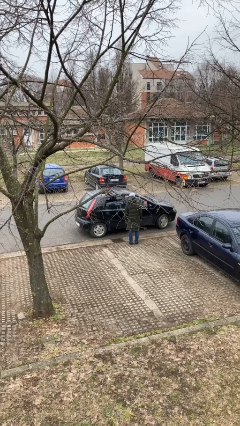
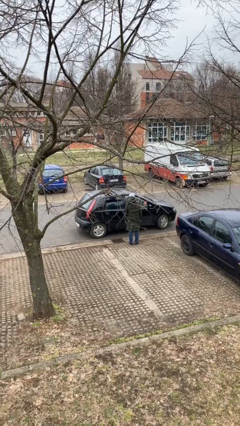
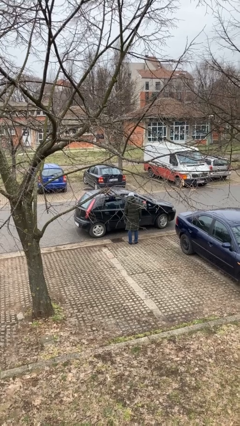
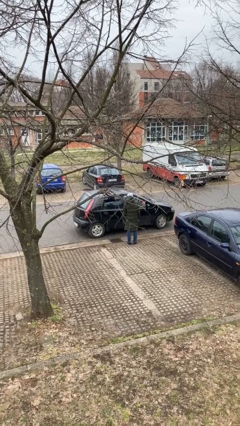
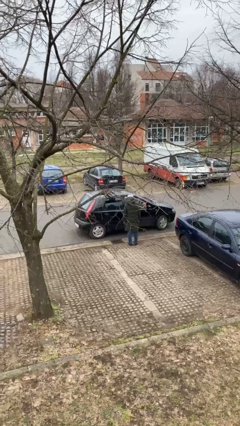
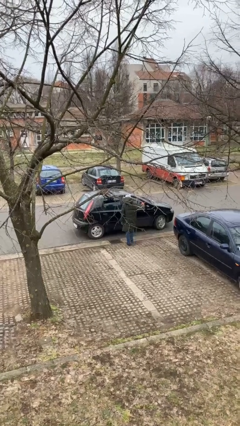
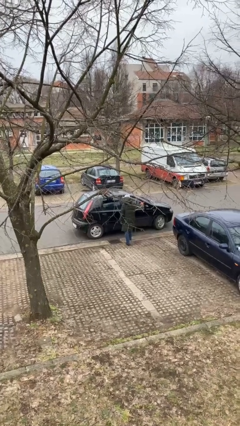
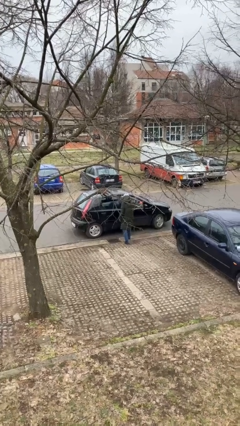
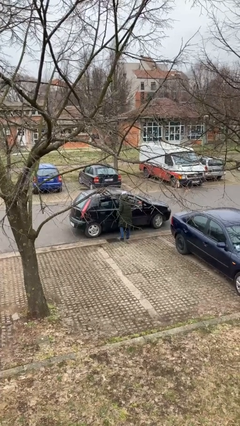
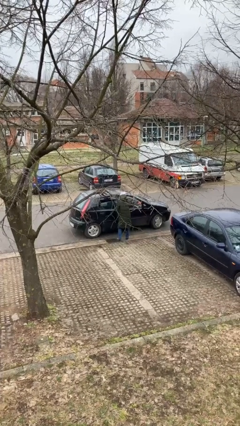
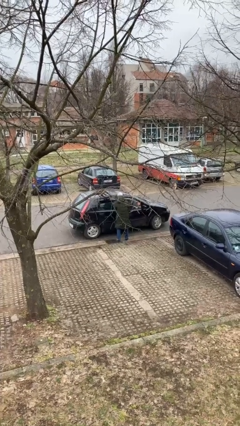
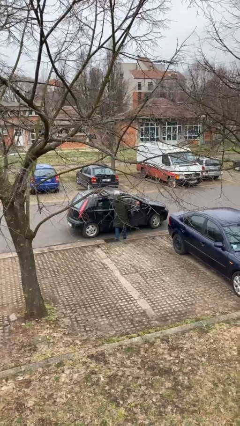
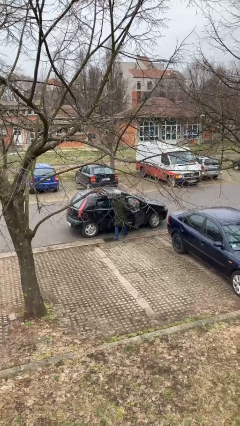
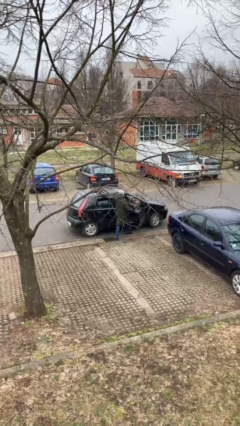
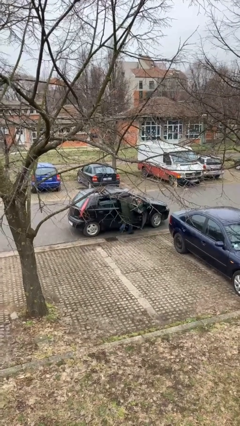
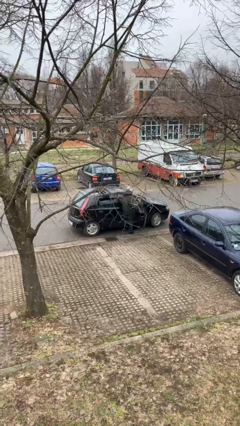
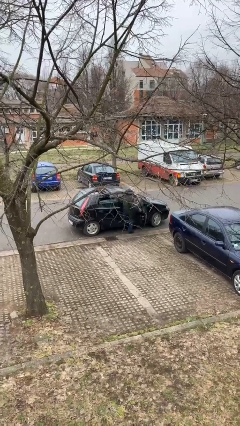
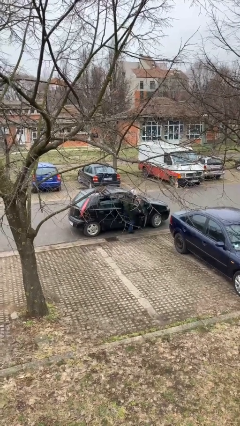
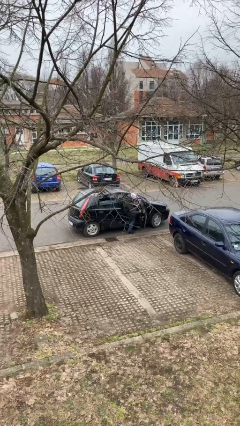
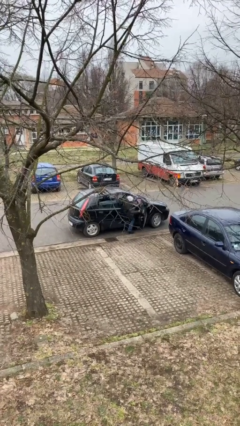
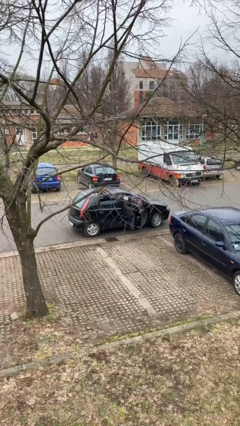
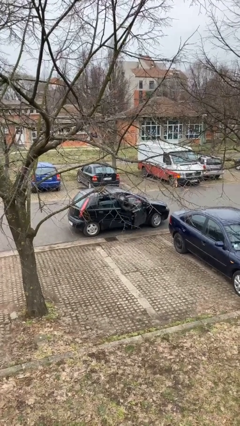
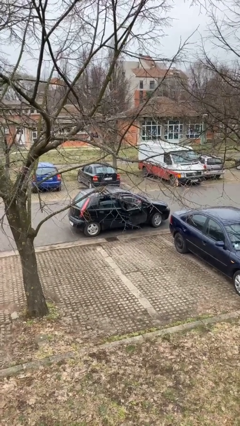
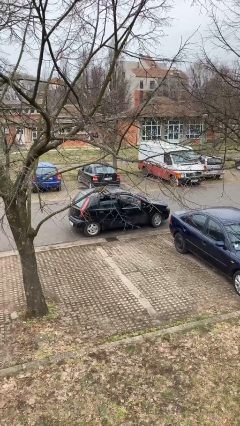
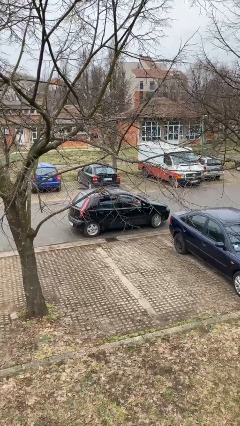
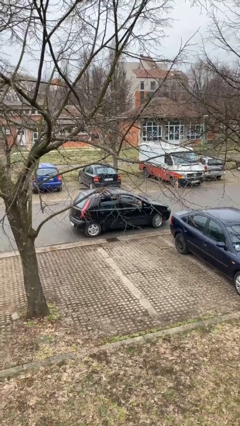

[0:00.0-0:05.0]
car picks up person

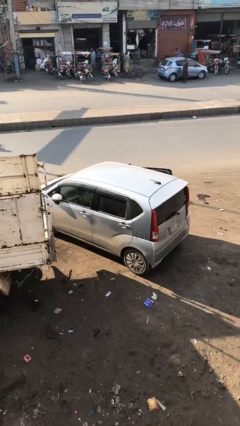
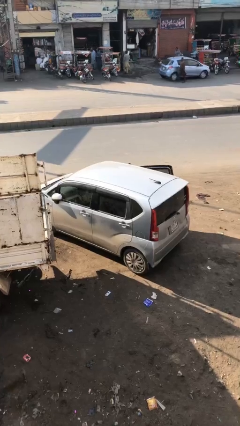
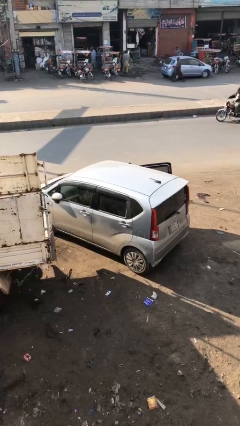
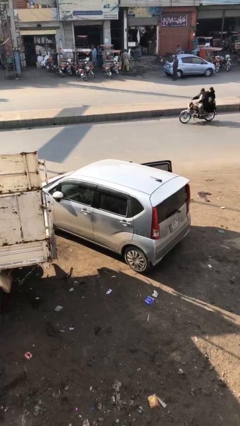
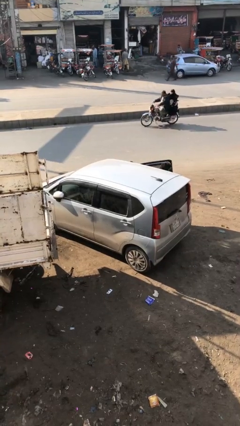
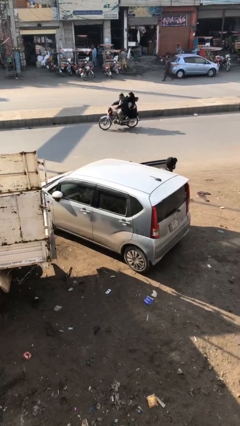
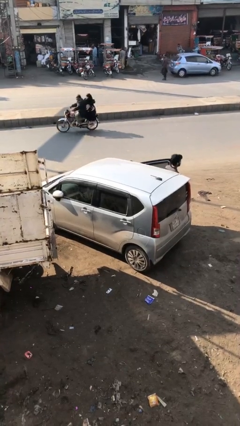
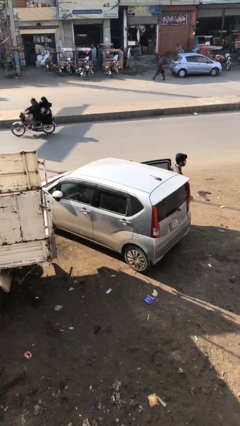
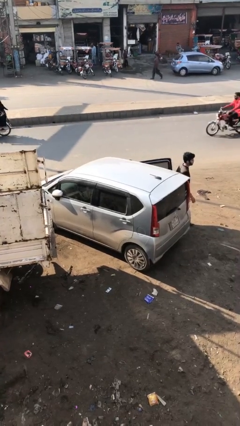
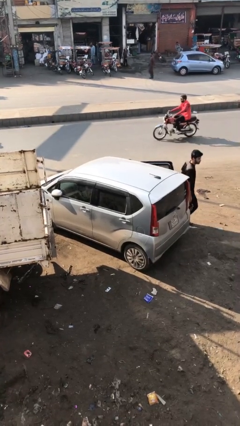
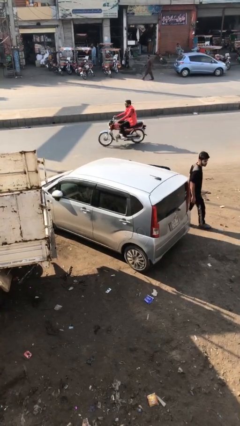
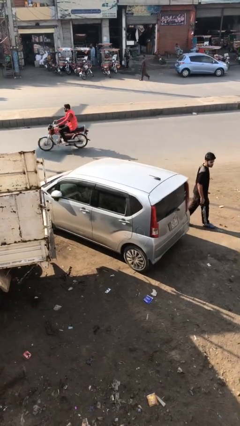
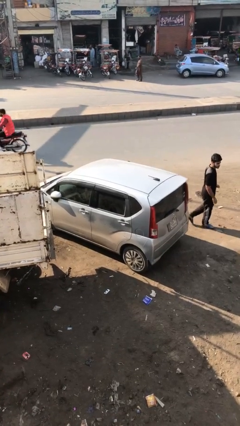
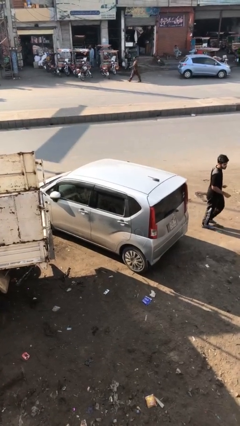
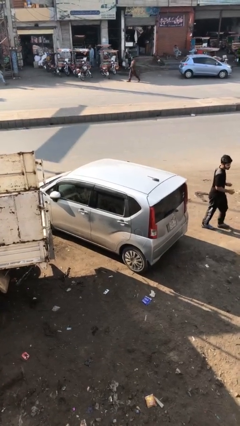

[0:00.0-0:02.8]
car drops off person

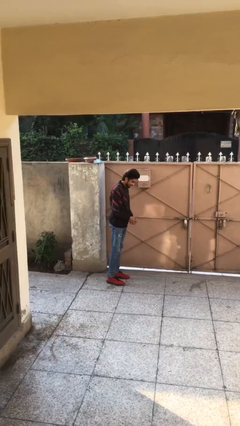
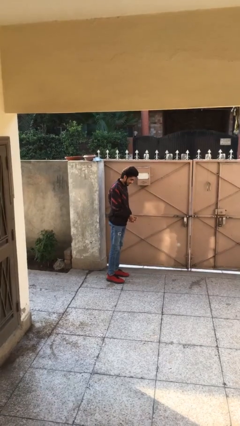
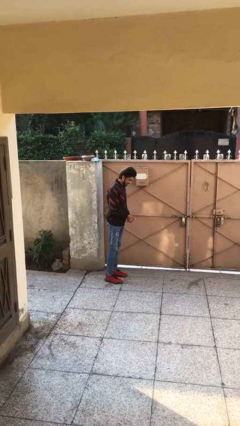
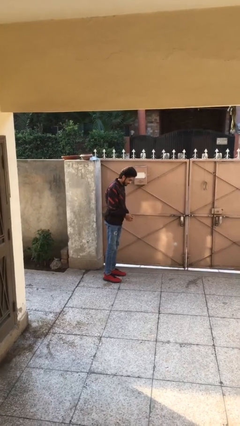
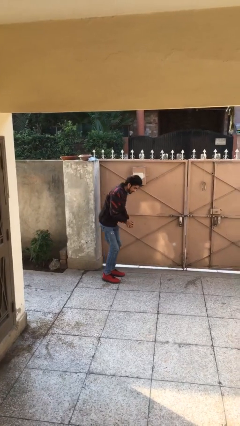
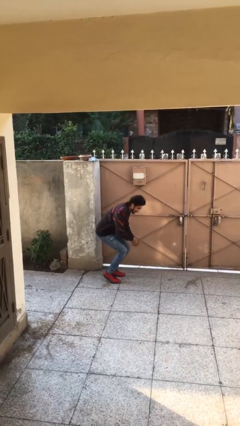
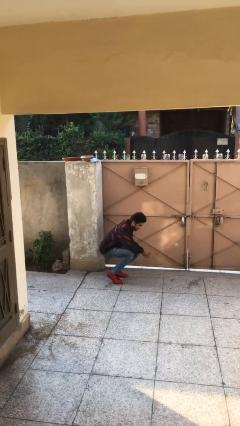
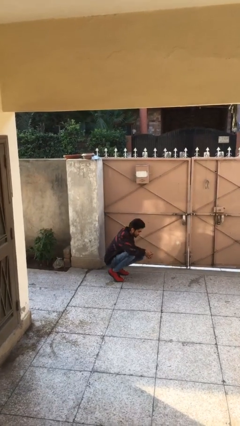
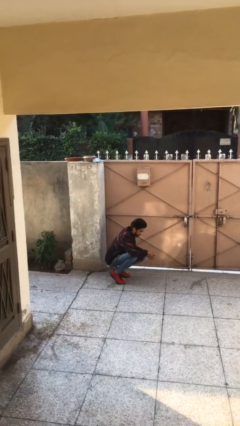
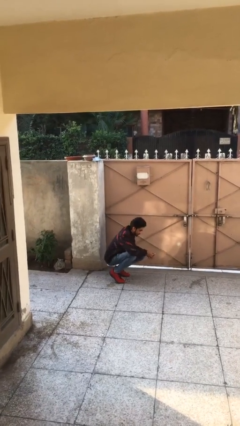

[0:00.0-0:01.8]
person sits down

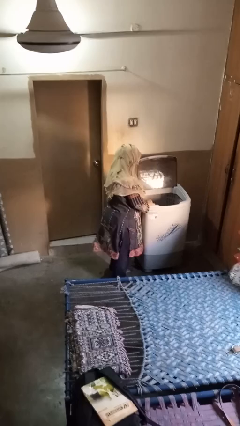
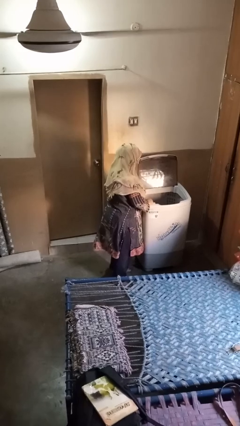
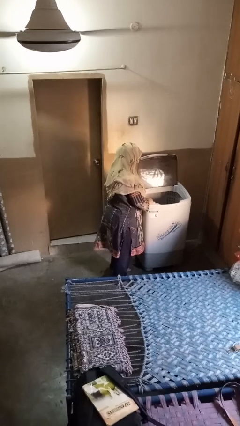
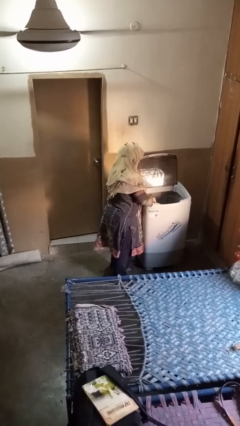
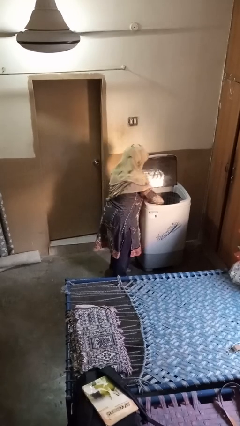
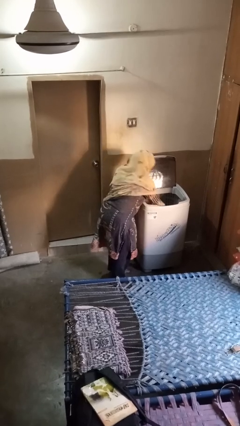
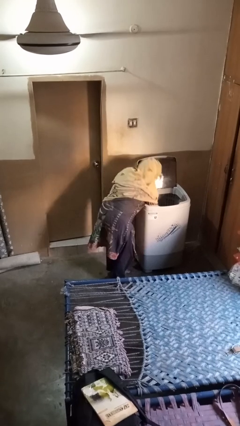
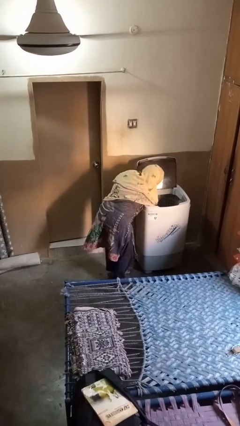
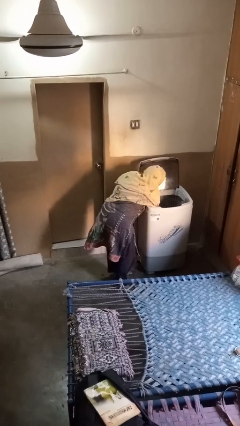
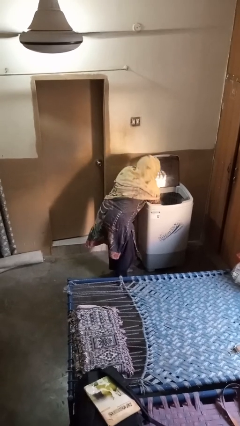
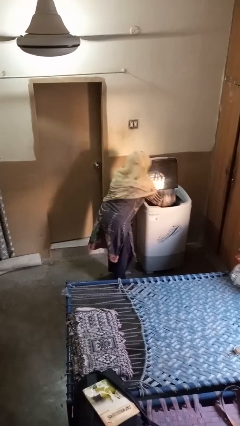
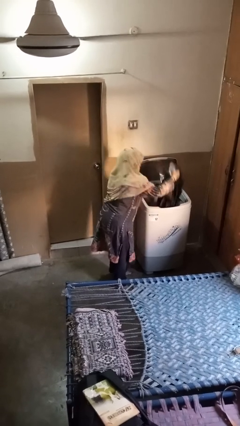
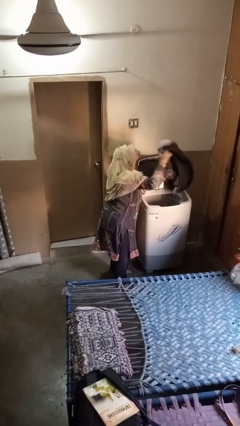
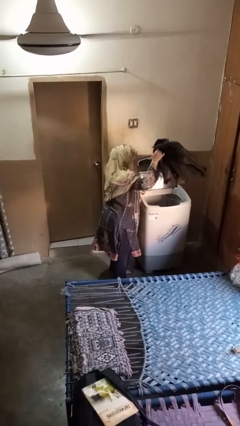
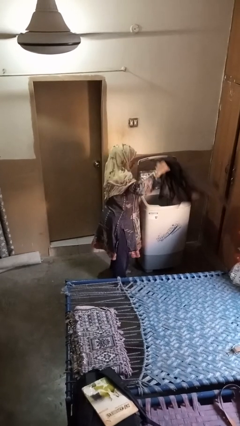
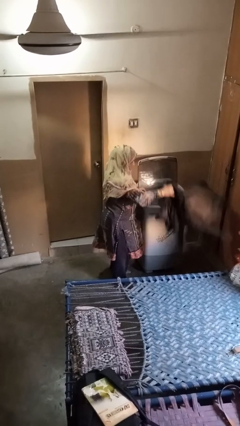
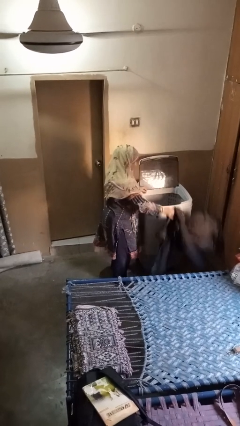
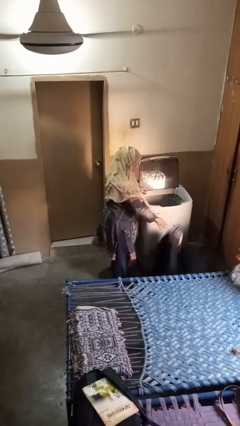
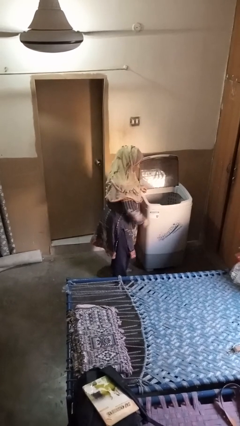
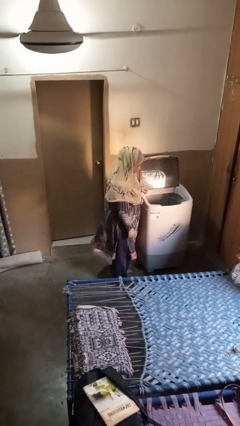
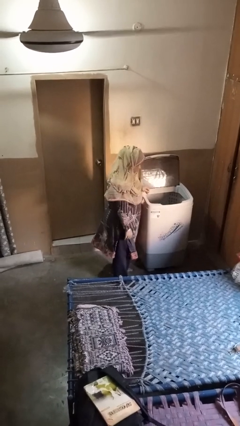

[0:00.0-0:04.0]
person unloads clotheswasher

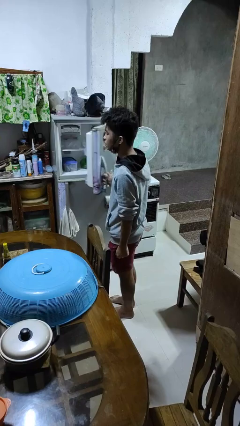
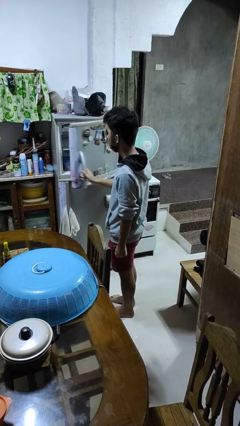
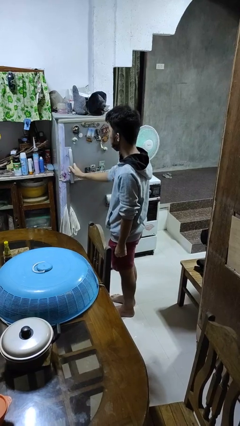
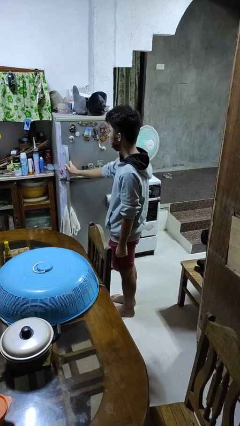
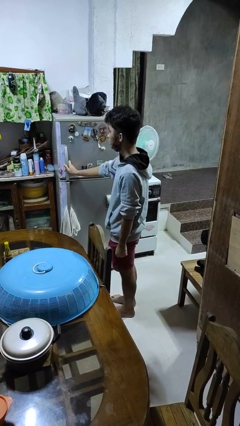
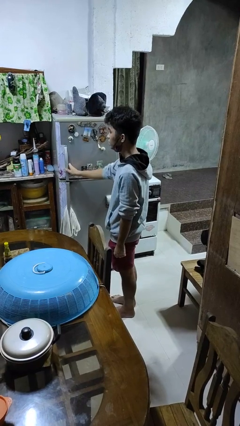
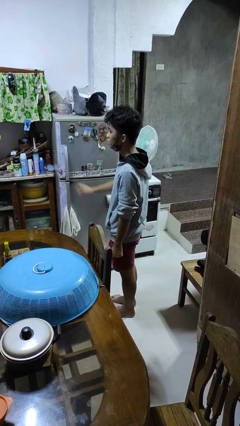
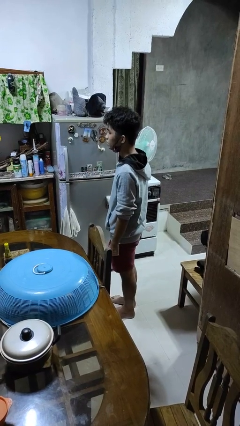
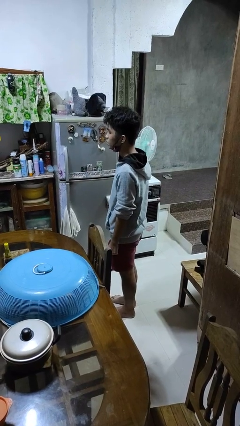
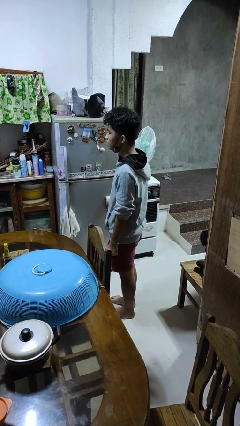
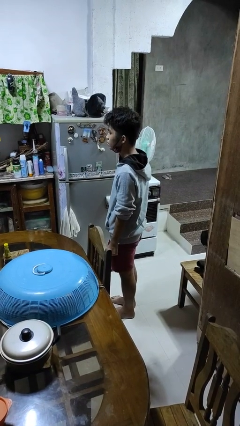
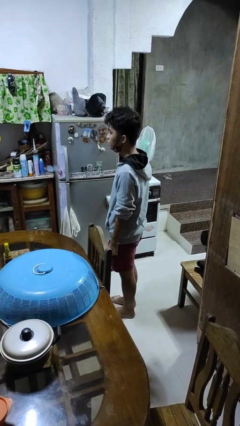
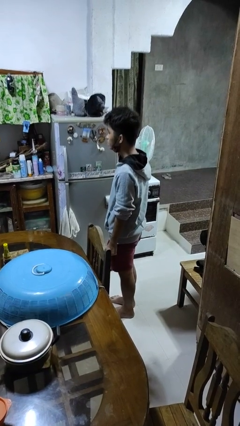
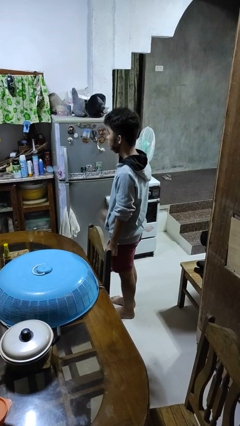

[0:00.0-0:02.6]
person closes refrigerator

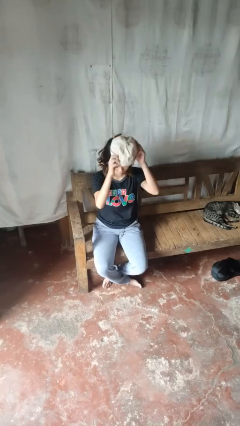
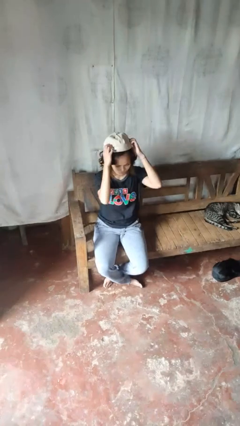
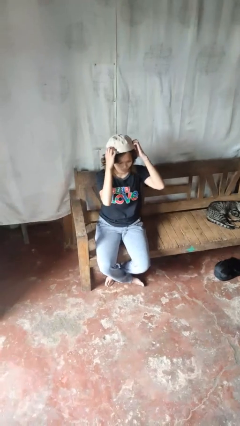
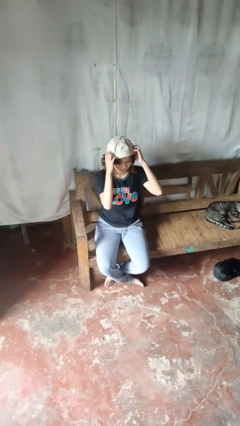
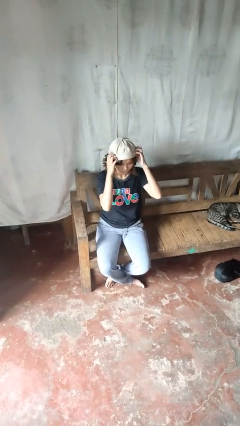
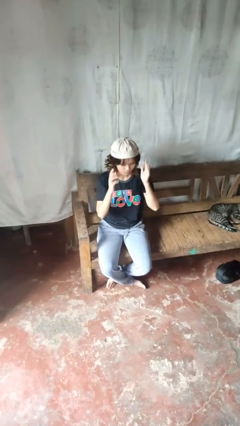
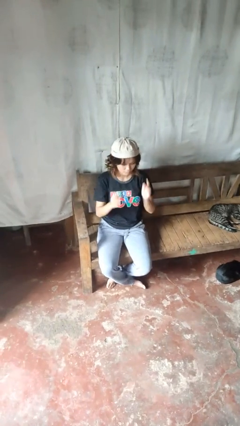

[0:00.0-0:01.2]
person puts on hat
